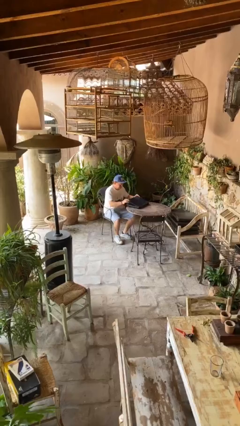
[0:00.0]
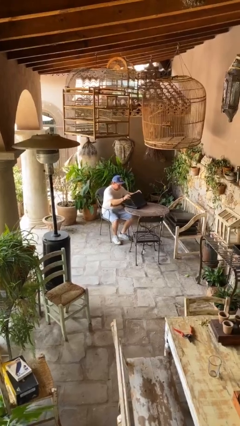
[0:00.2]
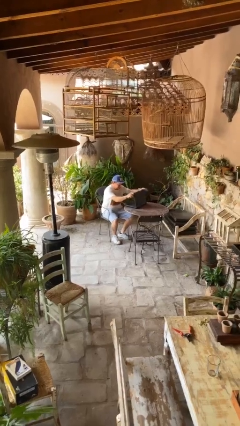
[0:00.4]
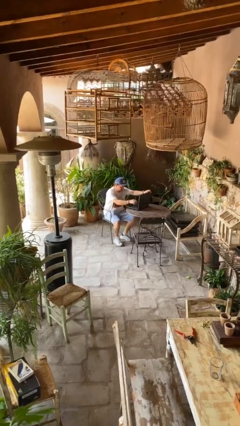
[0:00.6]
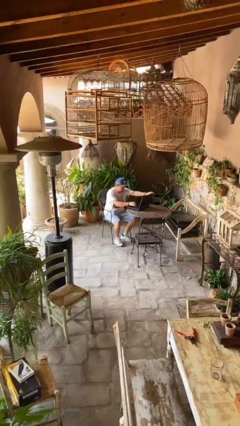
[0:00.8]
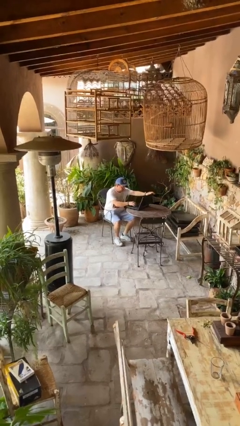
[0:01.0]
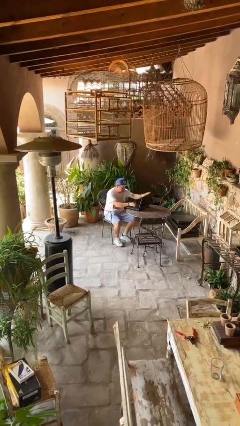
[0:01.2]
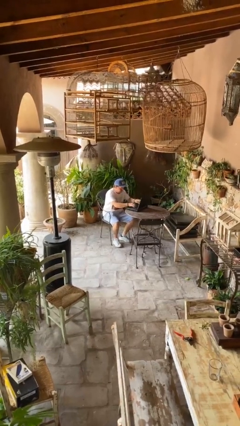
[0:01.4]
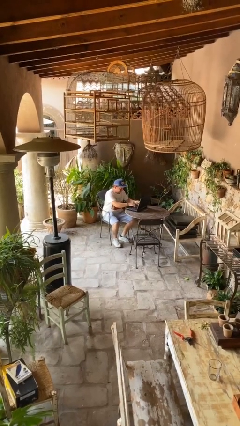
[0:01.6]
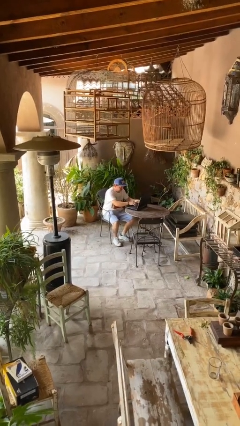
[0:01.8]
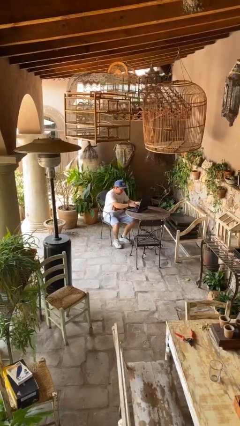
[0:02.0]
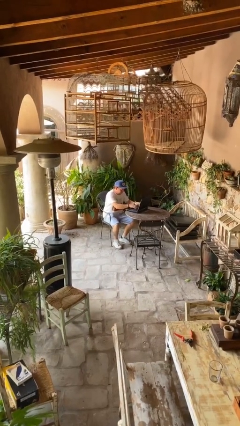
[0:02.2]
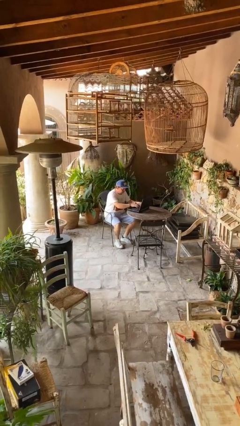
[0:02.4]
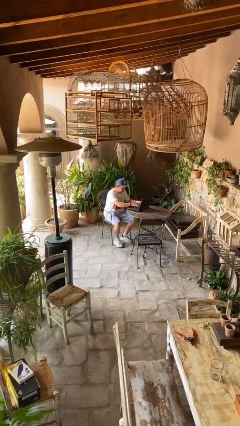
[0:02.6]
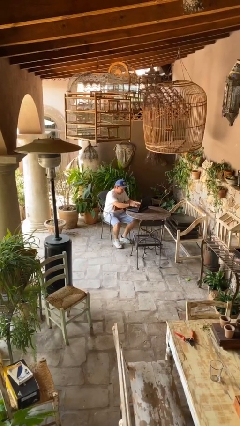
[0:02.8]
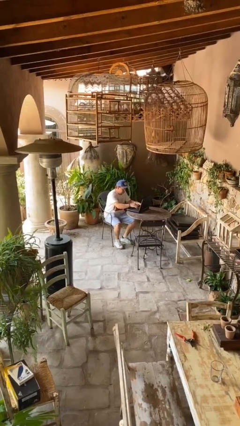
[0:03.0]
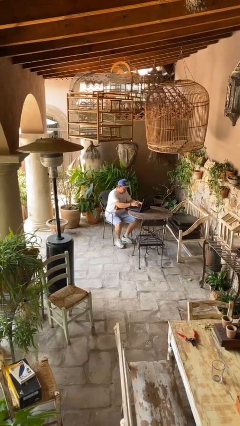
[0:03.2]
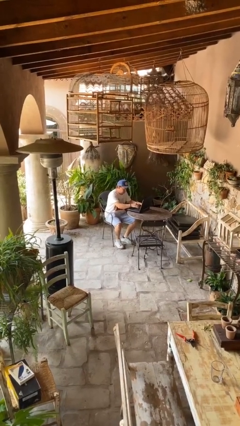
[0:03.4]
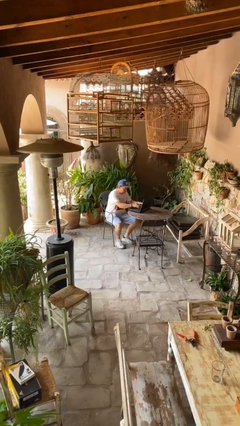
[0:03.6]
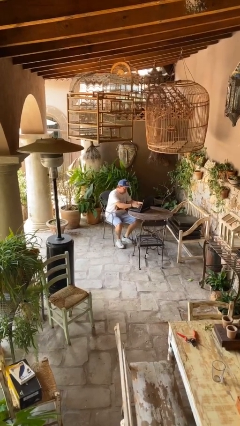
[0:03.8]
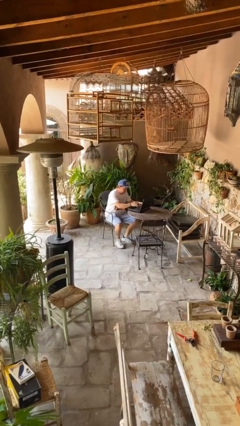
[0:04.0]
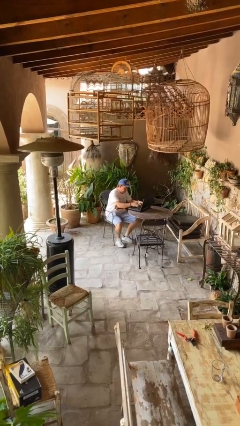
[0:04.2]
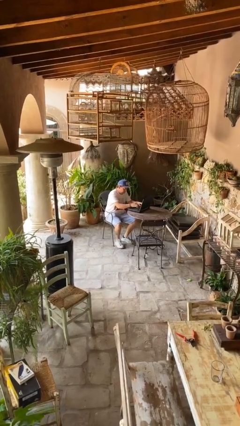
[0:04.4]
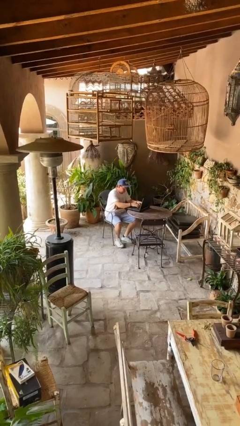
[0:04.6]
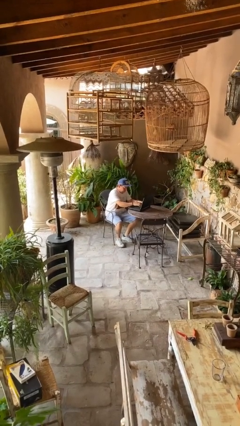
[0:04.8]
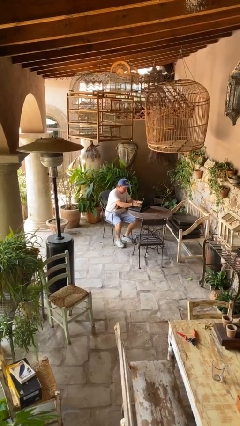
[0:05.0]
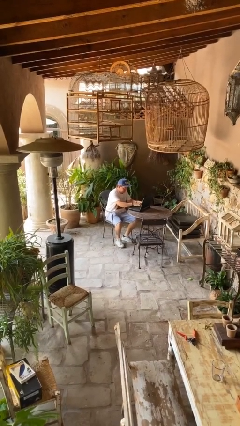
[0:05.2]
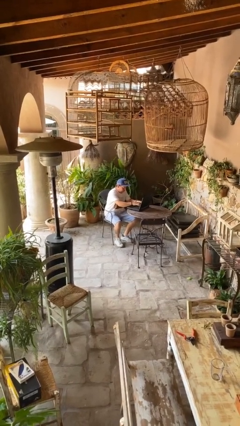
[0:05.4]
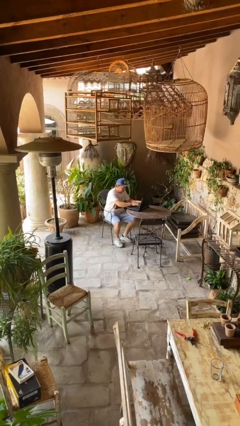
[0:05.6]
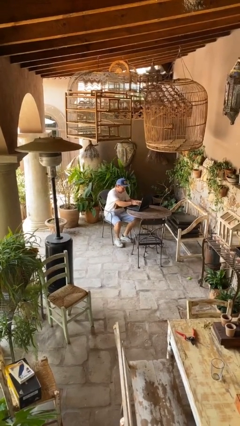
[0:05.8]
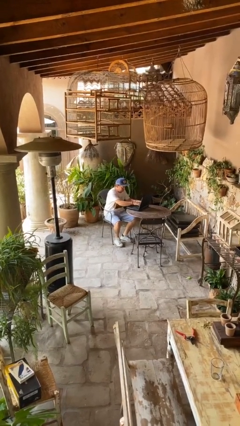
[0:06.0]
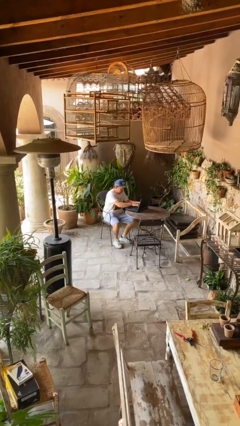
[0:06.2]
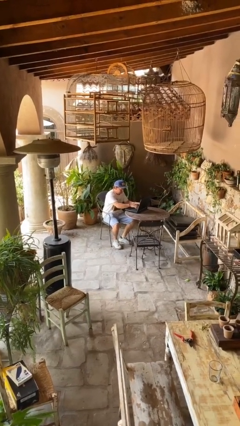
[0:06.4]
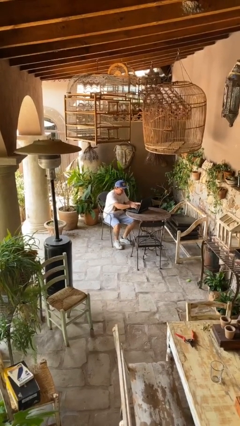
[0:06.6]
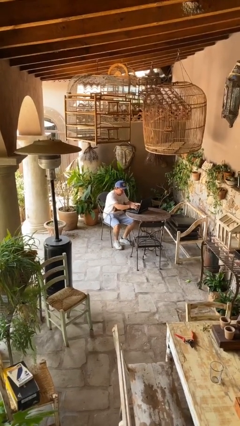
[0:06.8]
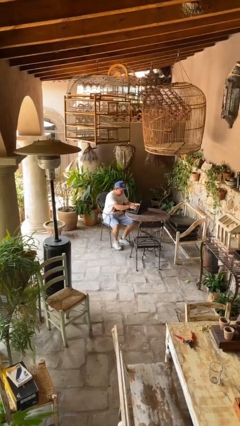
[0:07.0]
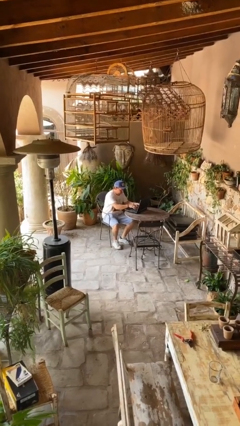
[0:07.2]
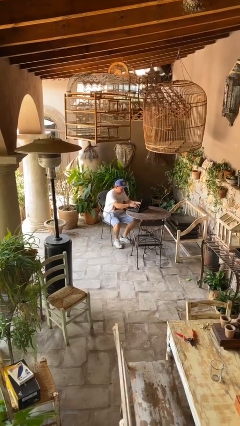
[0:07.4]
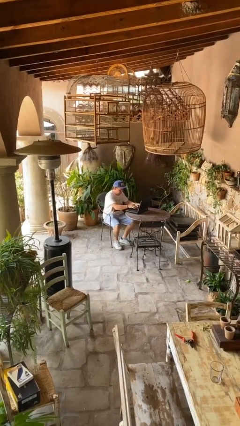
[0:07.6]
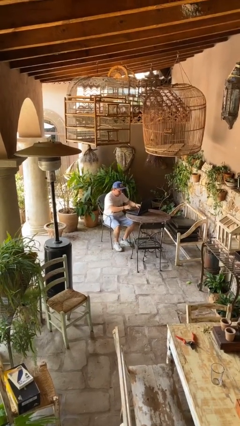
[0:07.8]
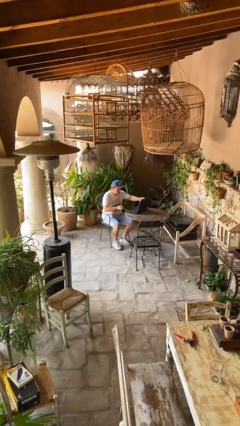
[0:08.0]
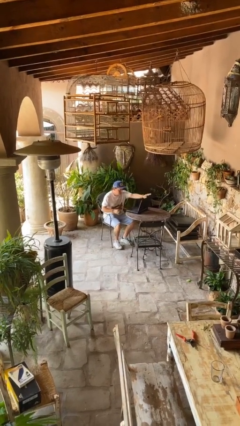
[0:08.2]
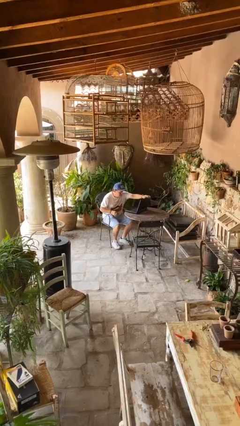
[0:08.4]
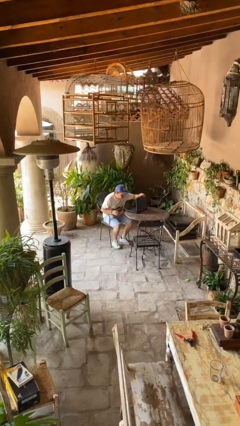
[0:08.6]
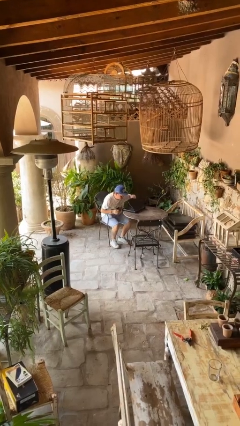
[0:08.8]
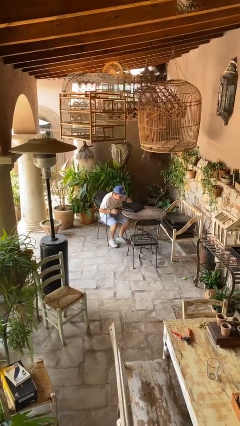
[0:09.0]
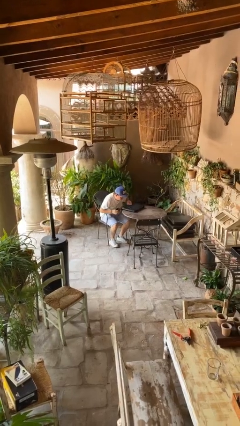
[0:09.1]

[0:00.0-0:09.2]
person interacts with laptop

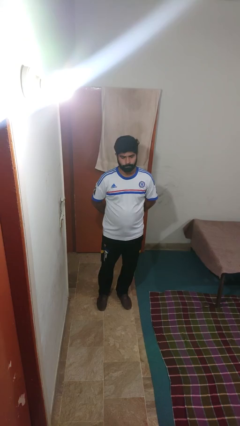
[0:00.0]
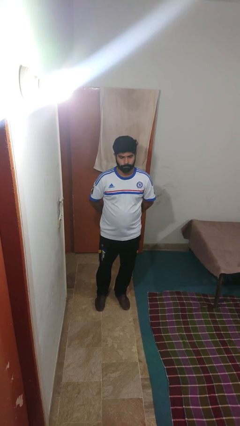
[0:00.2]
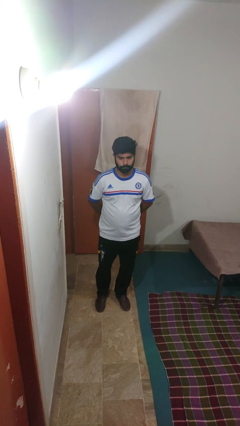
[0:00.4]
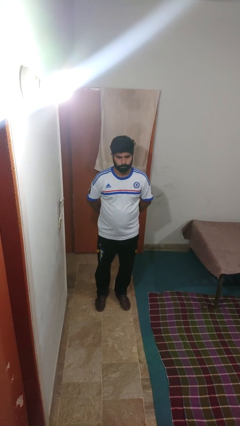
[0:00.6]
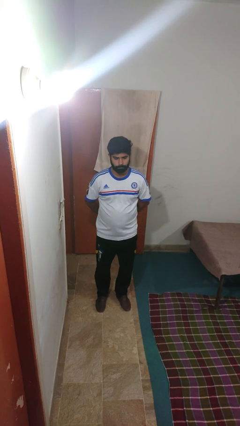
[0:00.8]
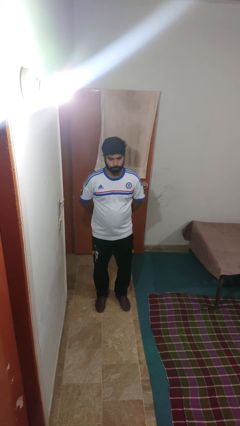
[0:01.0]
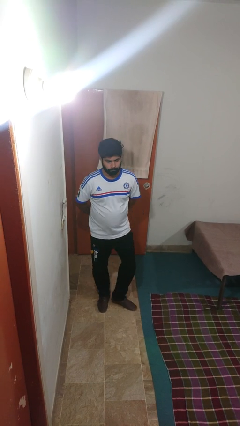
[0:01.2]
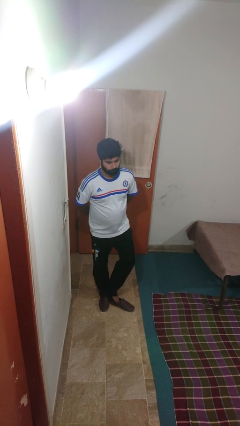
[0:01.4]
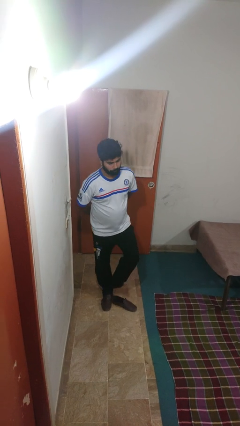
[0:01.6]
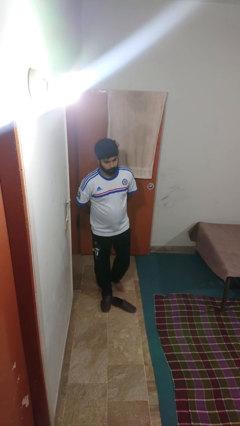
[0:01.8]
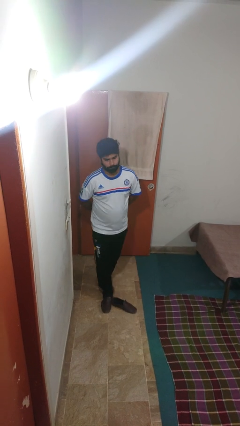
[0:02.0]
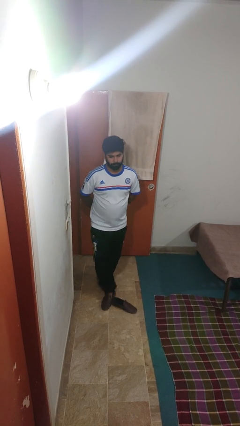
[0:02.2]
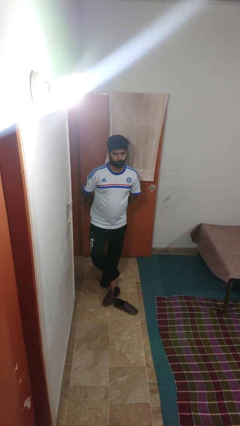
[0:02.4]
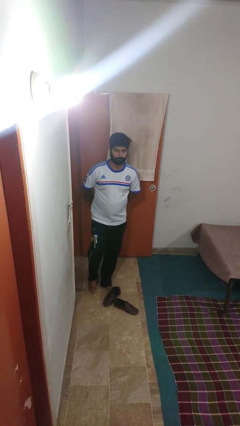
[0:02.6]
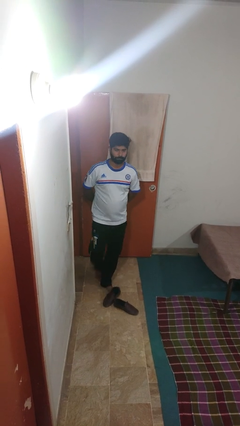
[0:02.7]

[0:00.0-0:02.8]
person takes off shoes

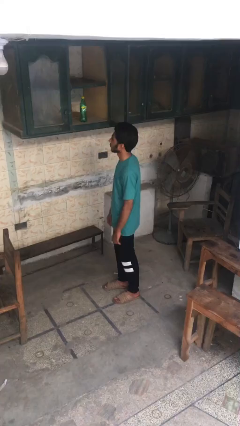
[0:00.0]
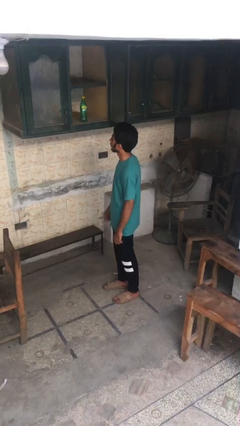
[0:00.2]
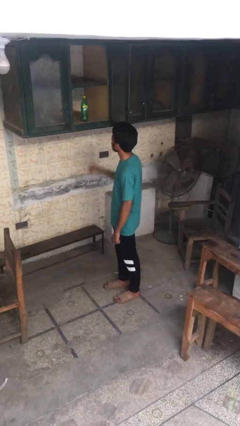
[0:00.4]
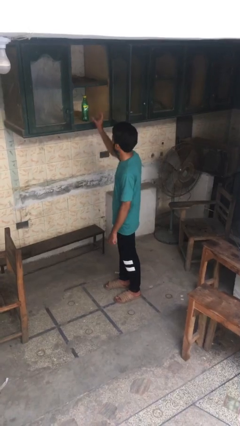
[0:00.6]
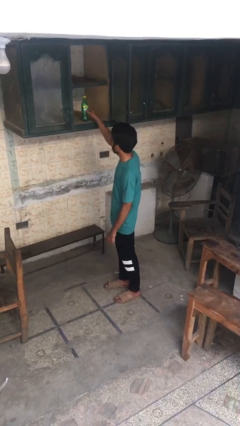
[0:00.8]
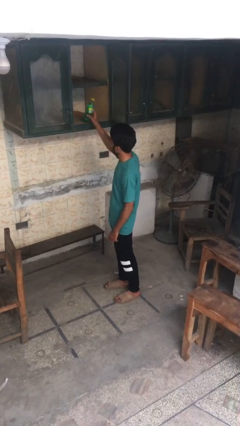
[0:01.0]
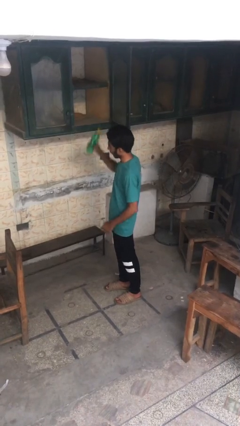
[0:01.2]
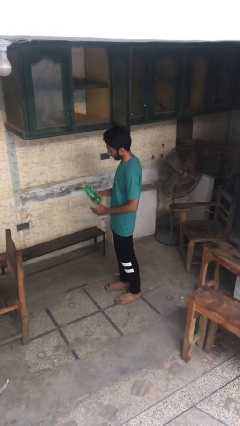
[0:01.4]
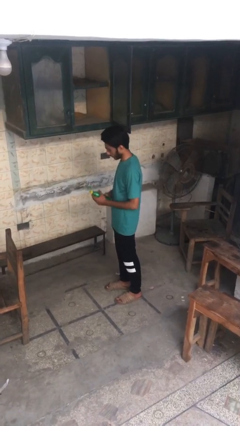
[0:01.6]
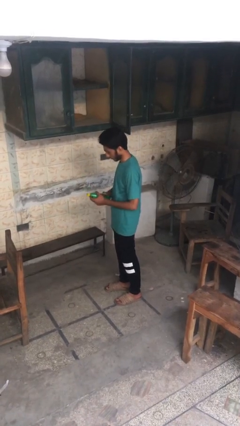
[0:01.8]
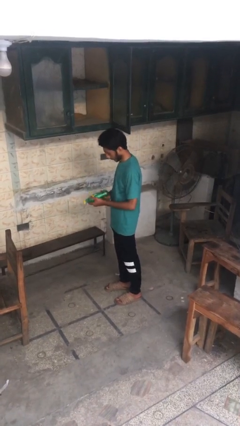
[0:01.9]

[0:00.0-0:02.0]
person takes object from cabinet

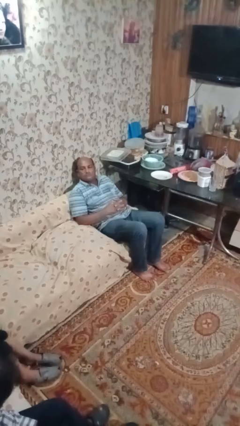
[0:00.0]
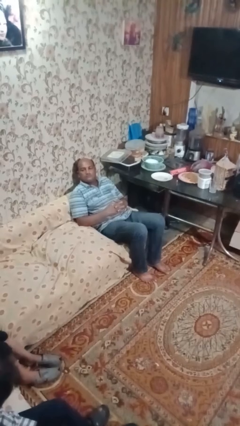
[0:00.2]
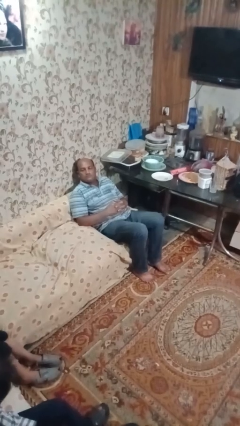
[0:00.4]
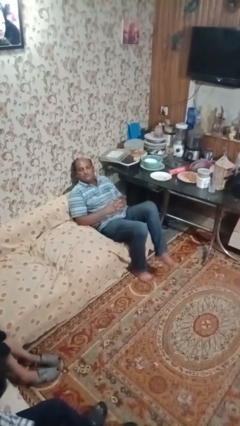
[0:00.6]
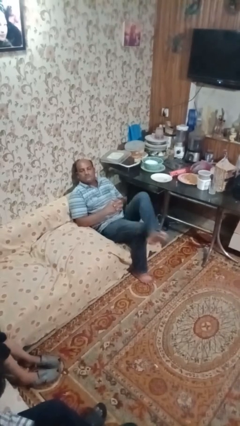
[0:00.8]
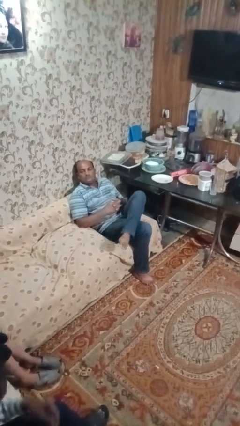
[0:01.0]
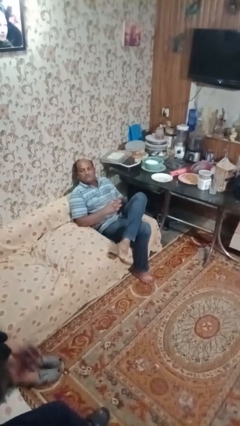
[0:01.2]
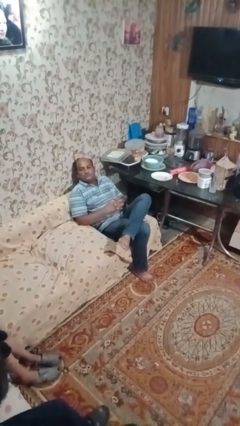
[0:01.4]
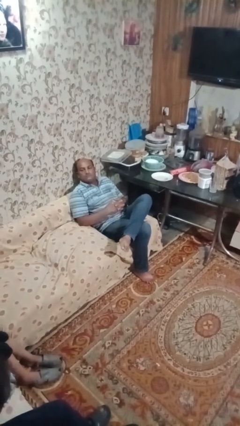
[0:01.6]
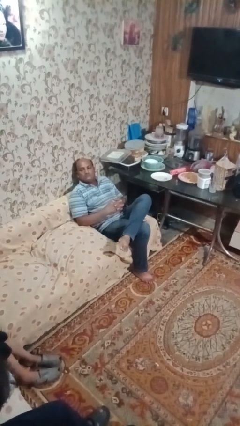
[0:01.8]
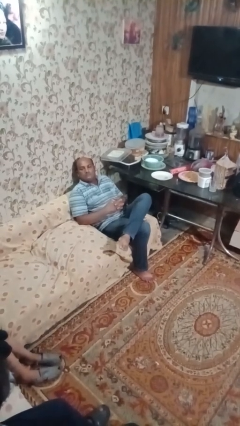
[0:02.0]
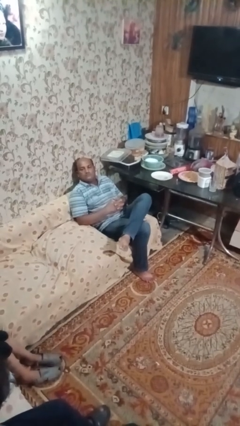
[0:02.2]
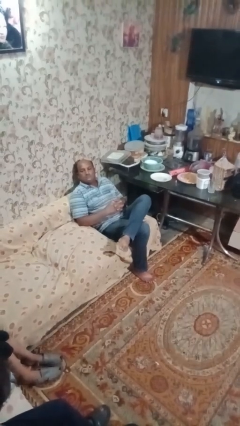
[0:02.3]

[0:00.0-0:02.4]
person crosses legs

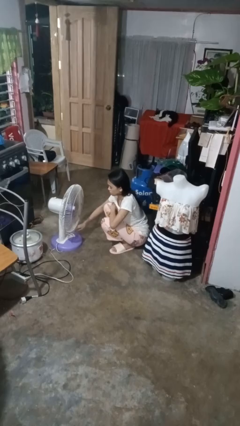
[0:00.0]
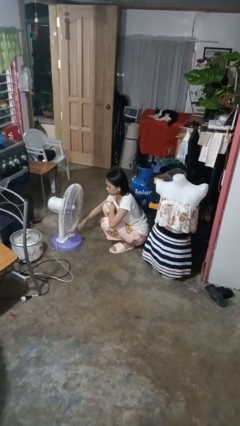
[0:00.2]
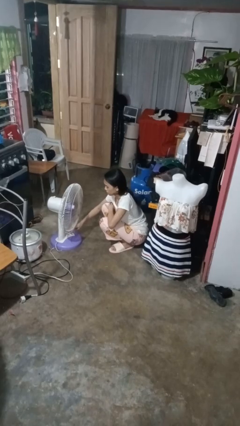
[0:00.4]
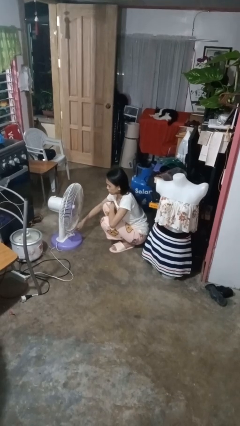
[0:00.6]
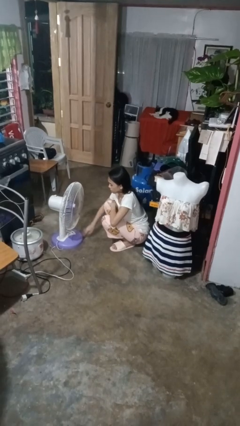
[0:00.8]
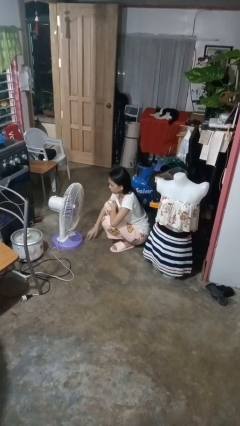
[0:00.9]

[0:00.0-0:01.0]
person turns on fan
